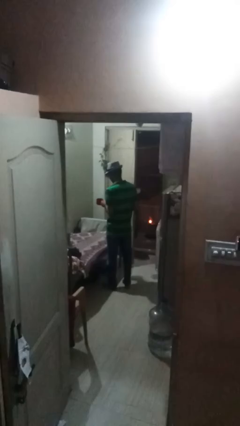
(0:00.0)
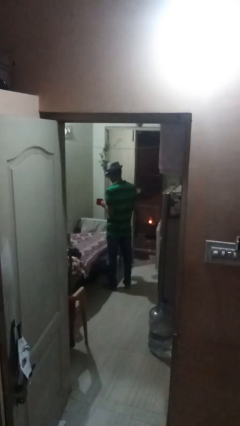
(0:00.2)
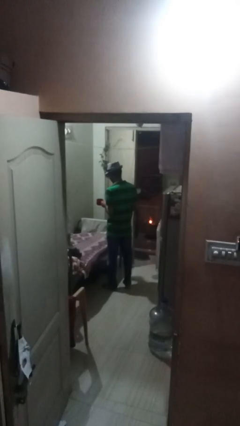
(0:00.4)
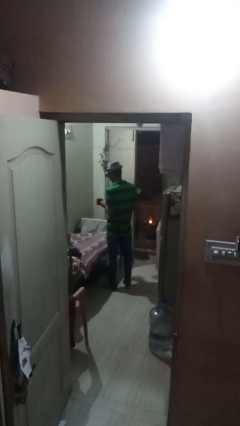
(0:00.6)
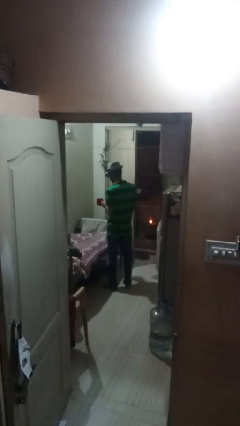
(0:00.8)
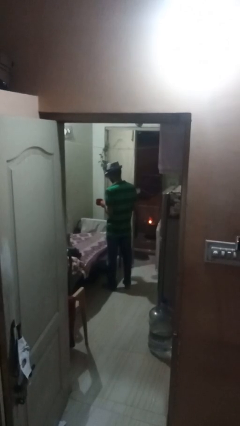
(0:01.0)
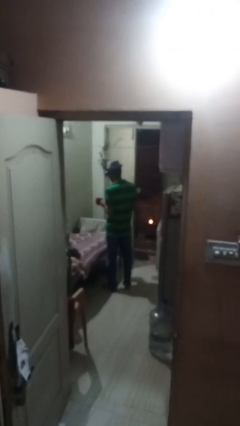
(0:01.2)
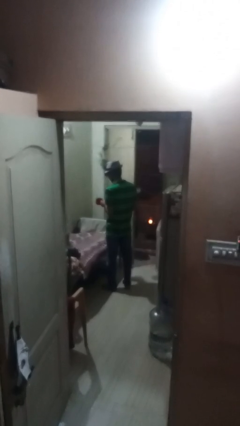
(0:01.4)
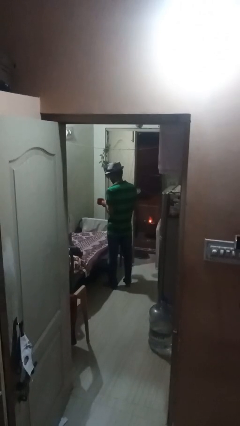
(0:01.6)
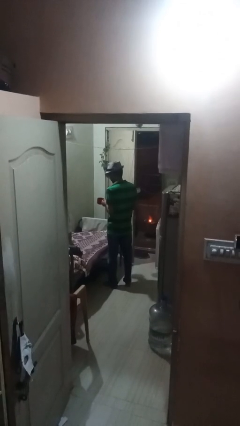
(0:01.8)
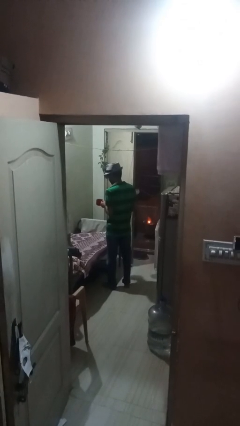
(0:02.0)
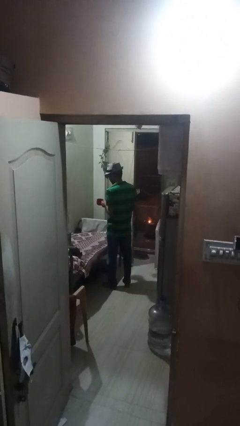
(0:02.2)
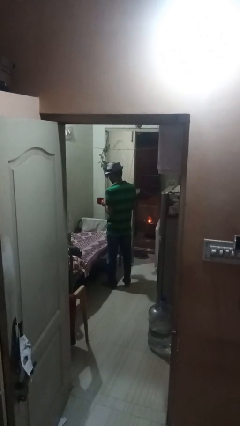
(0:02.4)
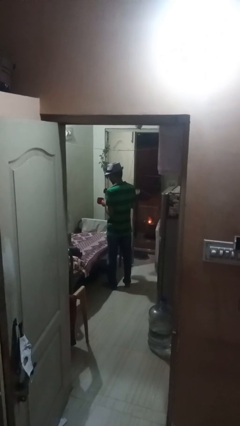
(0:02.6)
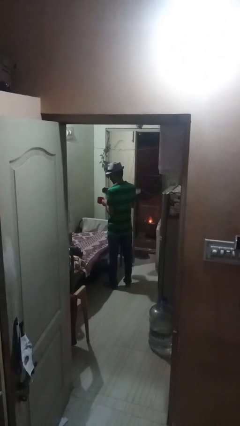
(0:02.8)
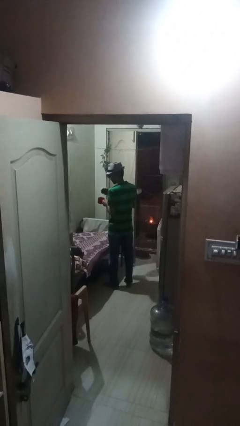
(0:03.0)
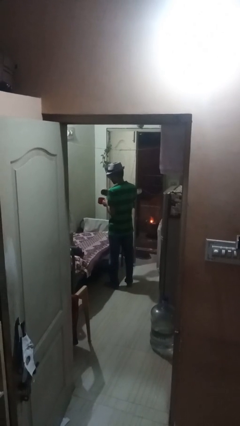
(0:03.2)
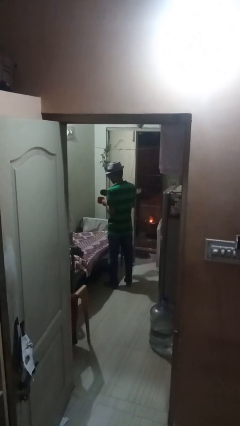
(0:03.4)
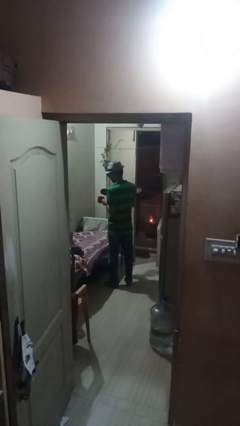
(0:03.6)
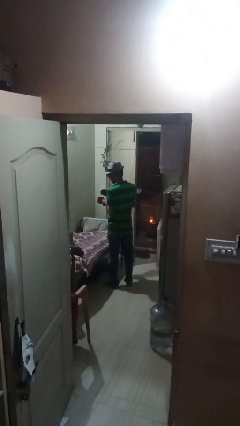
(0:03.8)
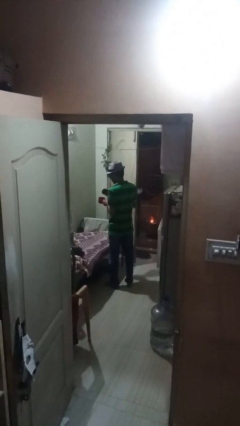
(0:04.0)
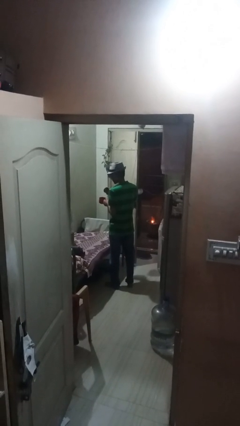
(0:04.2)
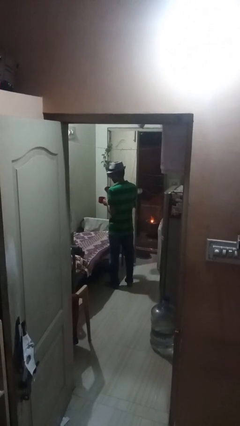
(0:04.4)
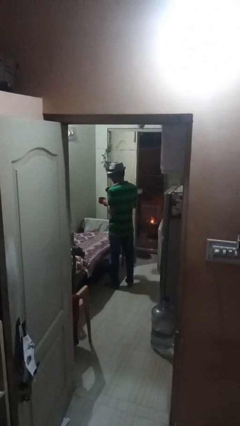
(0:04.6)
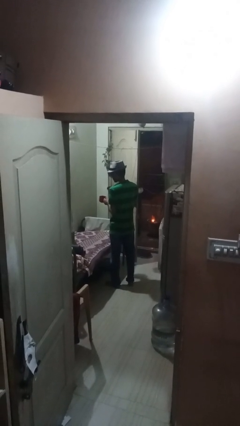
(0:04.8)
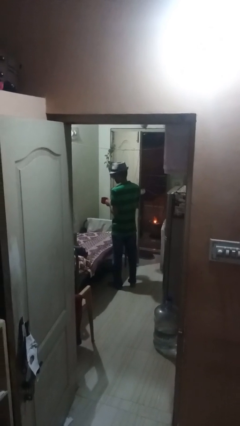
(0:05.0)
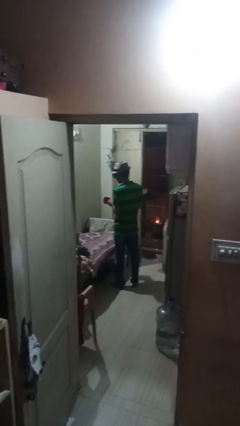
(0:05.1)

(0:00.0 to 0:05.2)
person pours coffee into mug

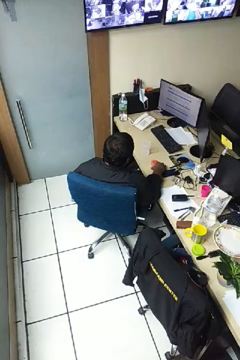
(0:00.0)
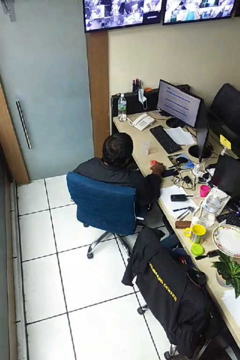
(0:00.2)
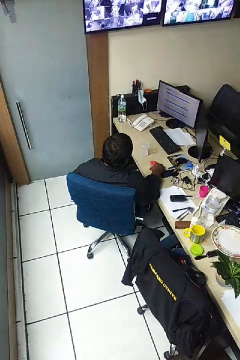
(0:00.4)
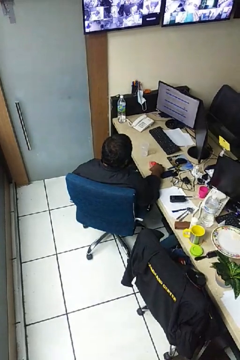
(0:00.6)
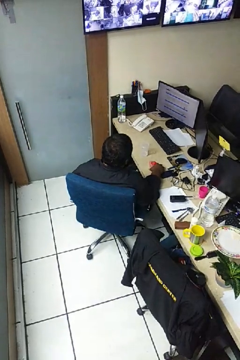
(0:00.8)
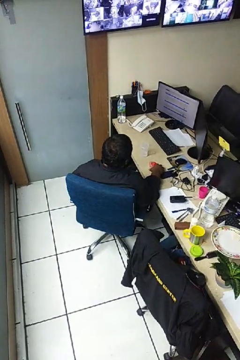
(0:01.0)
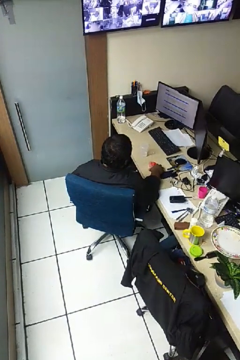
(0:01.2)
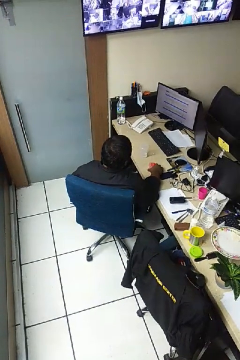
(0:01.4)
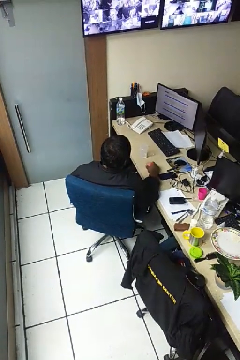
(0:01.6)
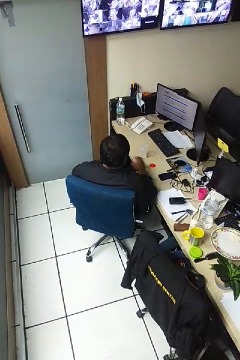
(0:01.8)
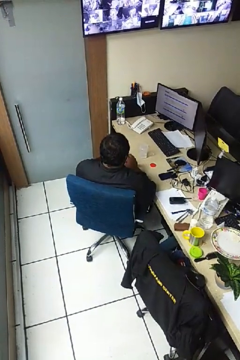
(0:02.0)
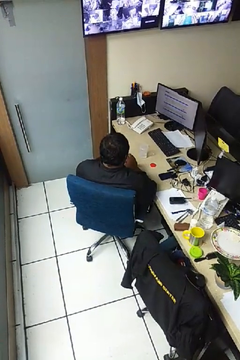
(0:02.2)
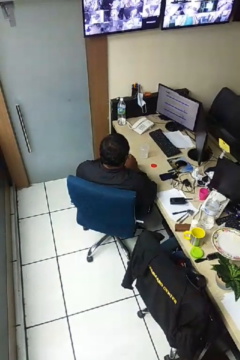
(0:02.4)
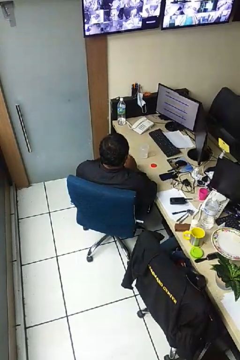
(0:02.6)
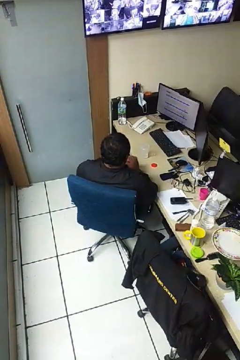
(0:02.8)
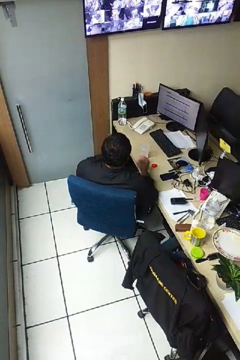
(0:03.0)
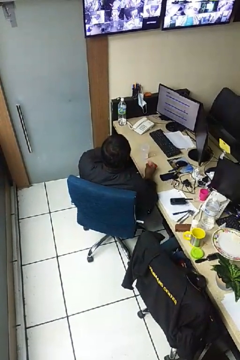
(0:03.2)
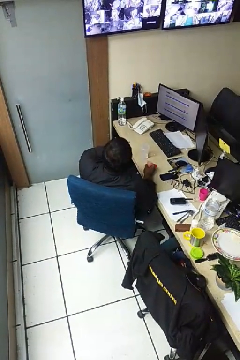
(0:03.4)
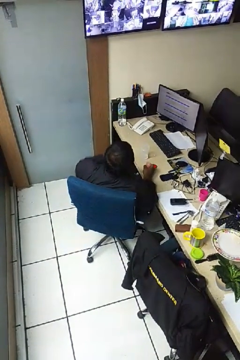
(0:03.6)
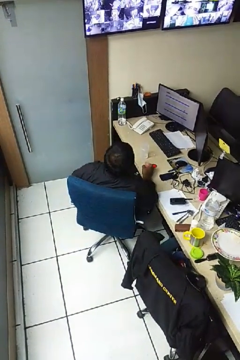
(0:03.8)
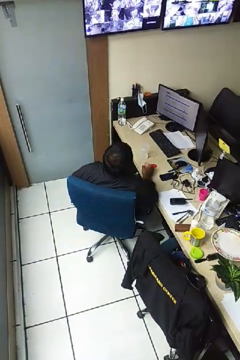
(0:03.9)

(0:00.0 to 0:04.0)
person takes medicine pills

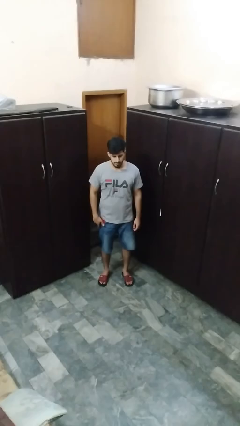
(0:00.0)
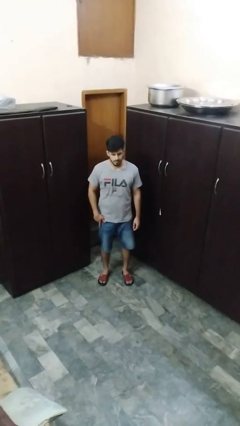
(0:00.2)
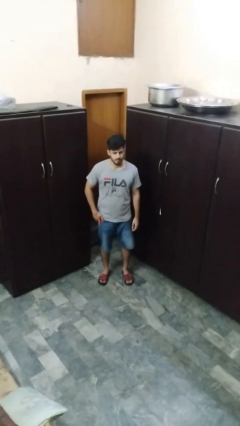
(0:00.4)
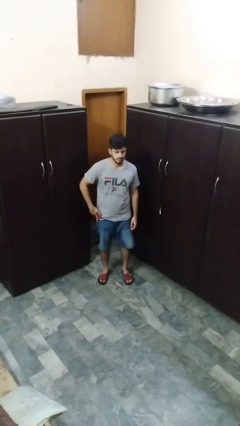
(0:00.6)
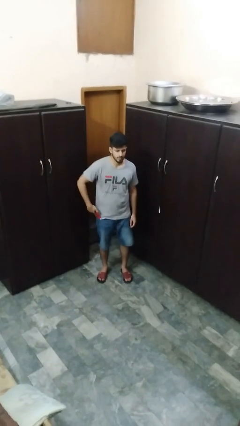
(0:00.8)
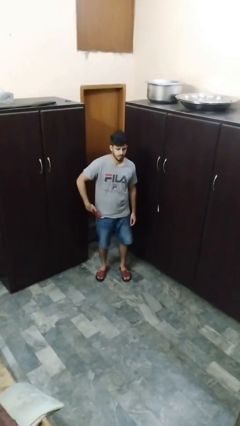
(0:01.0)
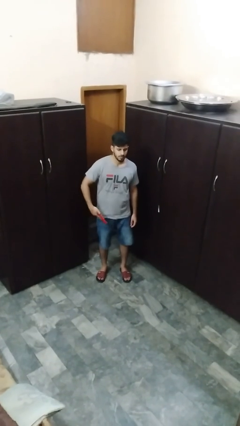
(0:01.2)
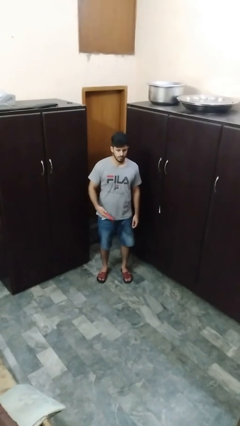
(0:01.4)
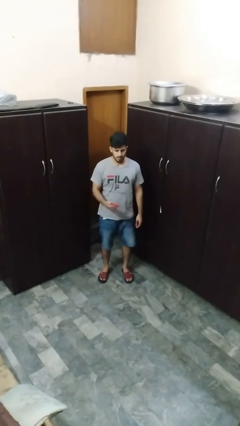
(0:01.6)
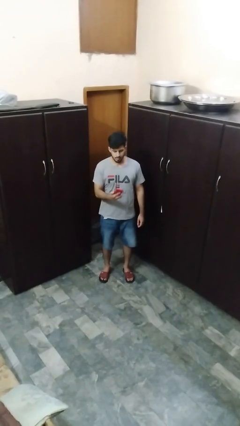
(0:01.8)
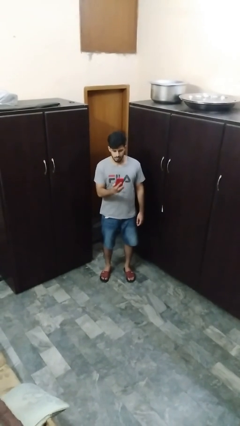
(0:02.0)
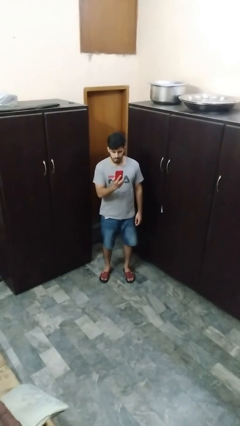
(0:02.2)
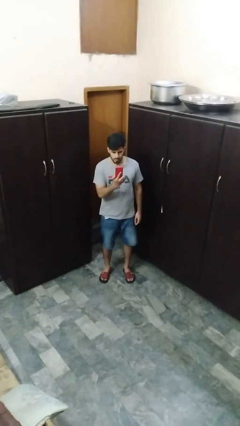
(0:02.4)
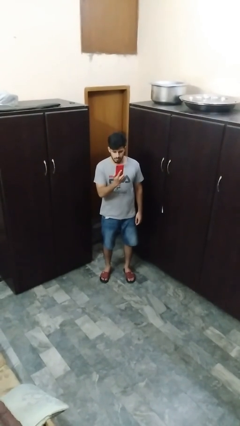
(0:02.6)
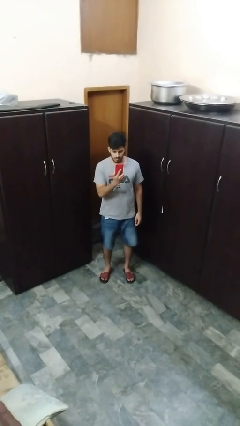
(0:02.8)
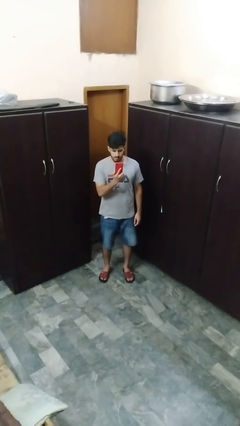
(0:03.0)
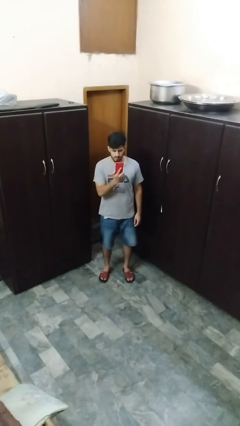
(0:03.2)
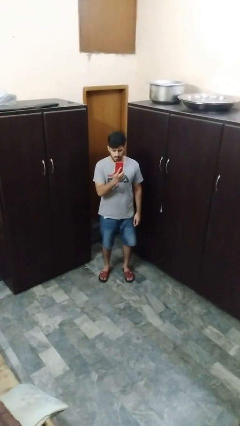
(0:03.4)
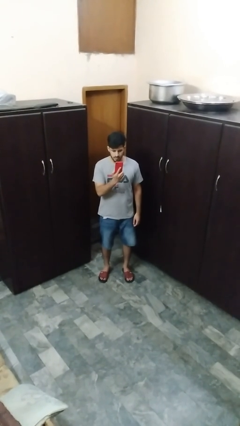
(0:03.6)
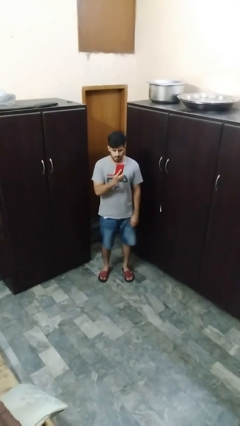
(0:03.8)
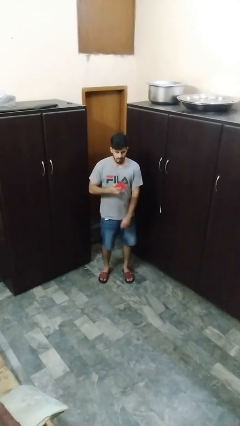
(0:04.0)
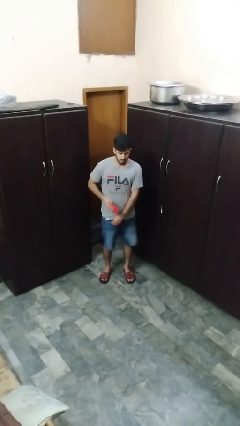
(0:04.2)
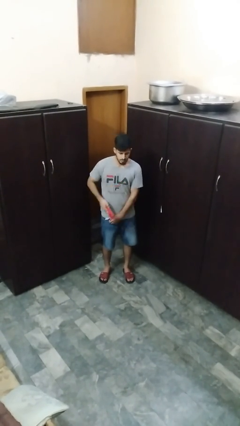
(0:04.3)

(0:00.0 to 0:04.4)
person takes phone from pocket

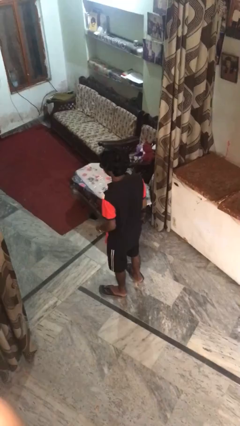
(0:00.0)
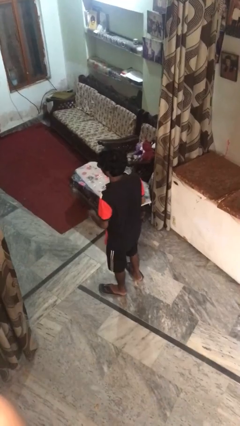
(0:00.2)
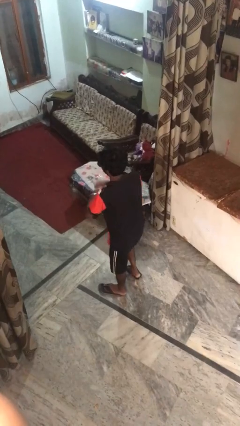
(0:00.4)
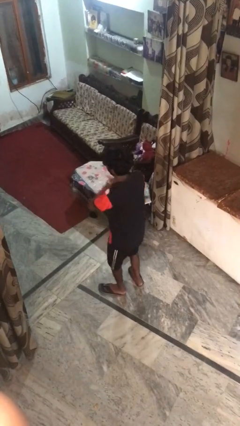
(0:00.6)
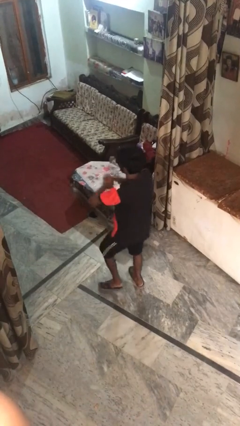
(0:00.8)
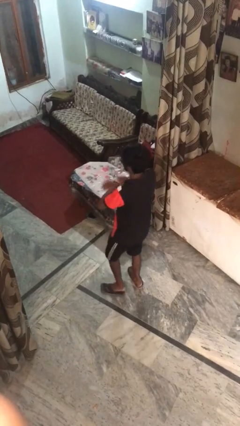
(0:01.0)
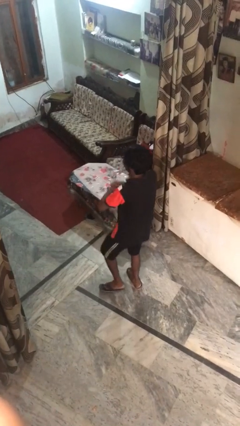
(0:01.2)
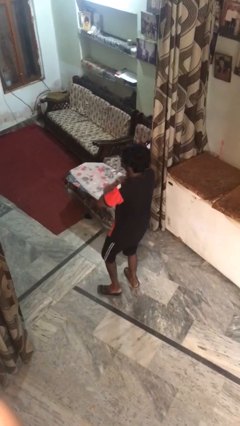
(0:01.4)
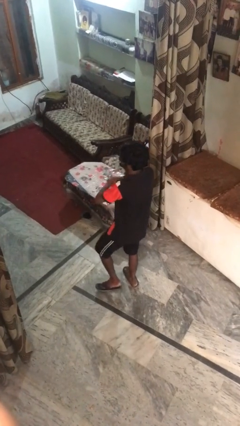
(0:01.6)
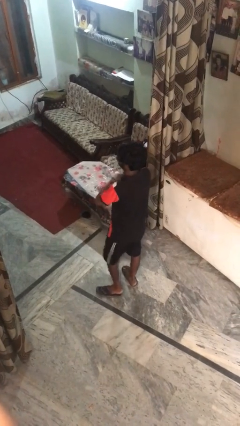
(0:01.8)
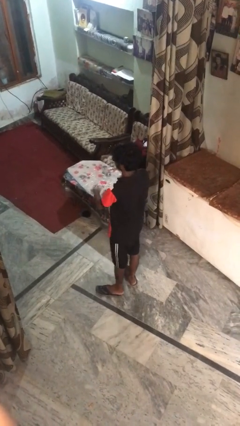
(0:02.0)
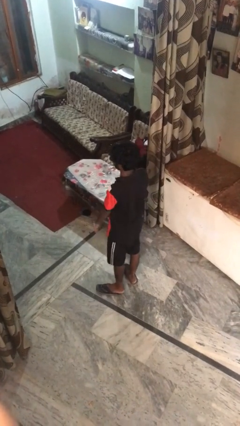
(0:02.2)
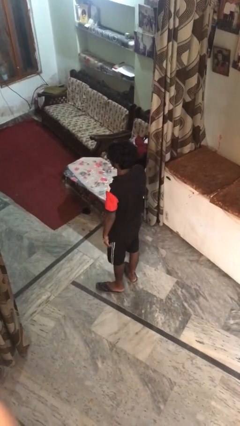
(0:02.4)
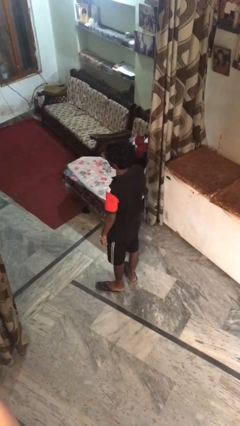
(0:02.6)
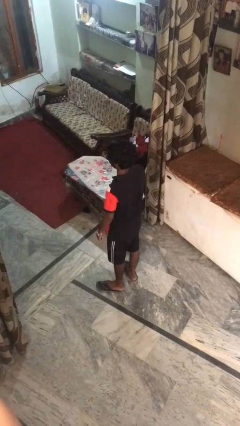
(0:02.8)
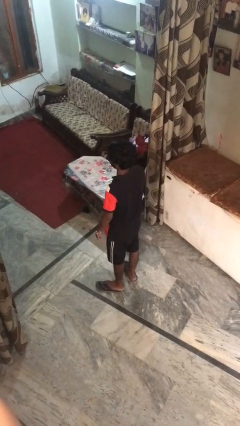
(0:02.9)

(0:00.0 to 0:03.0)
person dances in place

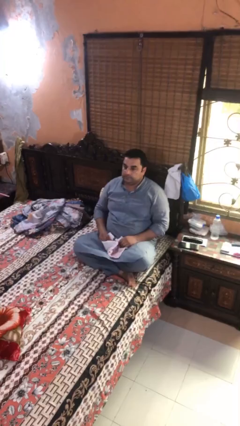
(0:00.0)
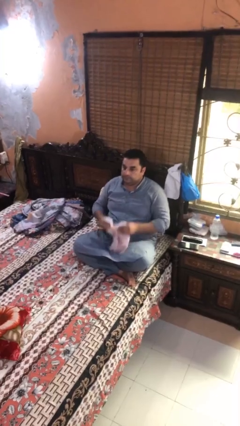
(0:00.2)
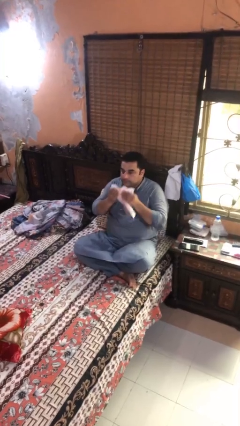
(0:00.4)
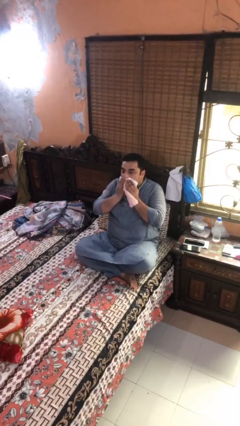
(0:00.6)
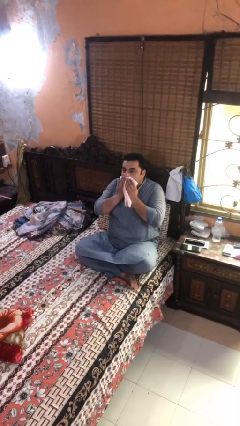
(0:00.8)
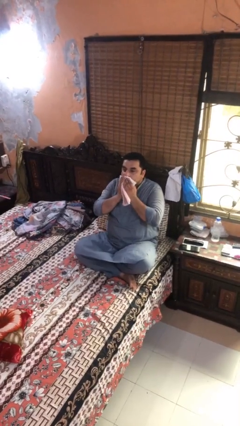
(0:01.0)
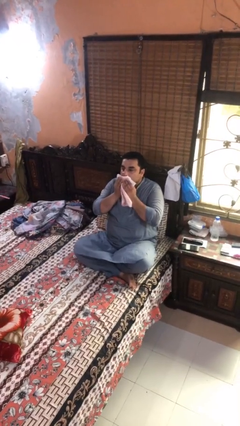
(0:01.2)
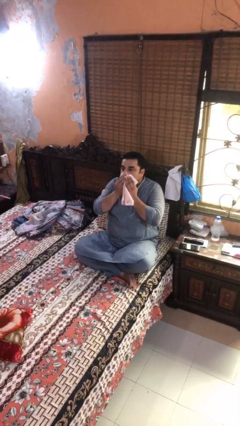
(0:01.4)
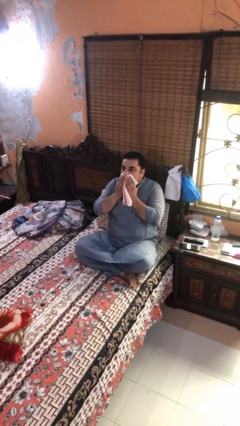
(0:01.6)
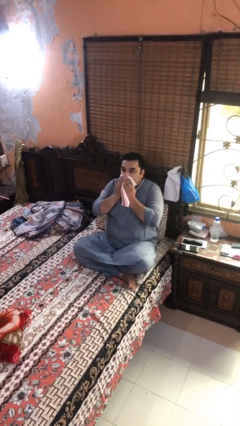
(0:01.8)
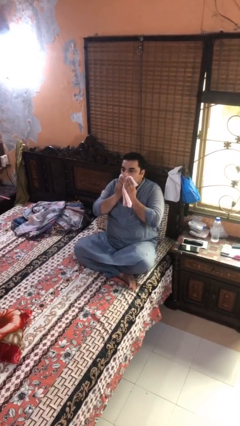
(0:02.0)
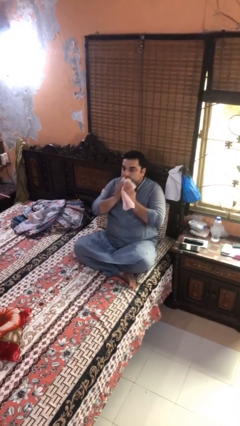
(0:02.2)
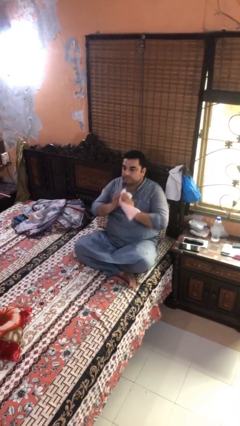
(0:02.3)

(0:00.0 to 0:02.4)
person wipes mouth with napkin
